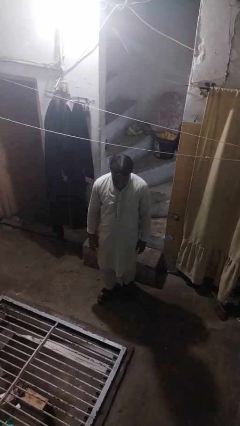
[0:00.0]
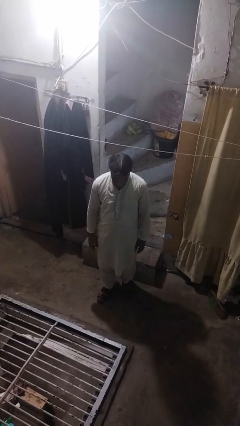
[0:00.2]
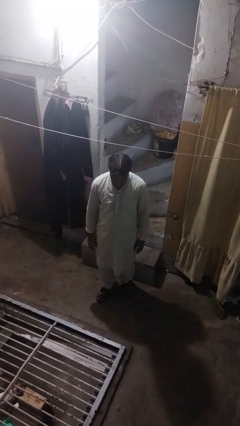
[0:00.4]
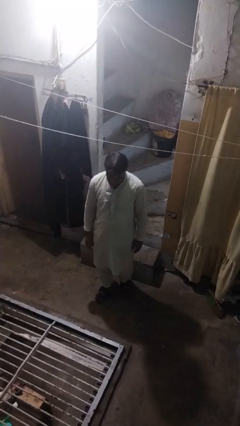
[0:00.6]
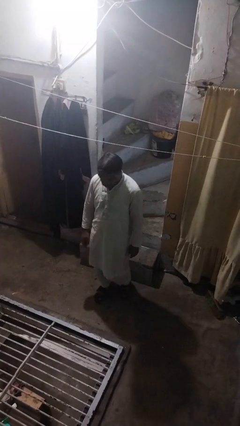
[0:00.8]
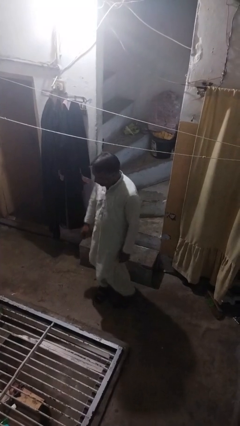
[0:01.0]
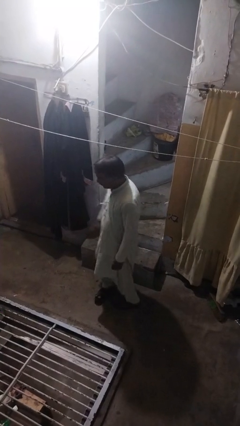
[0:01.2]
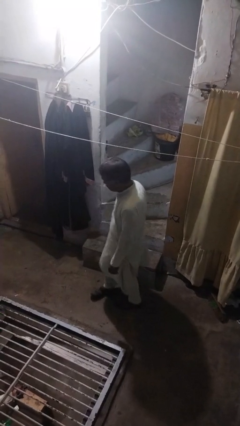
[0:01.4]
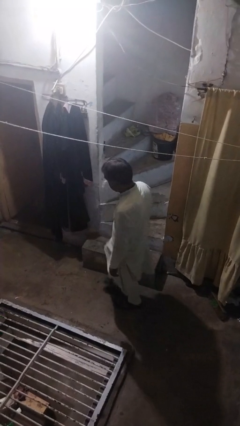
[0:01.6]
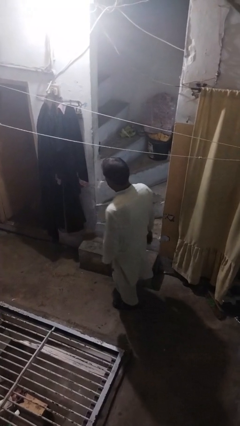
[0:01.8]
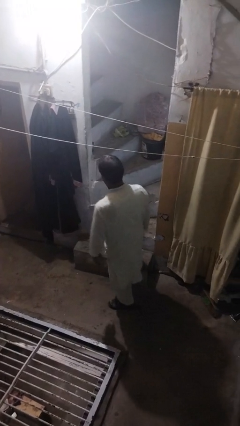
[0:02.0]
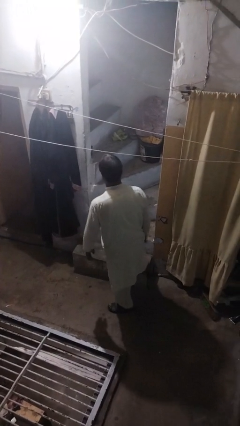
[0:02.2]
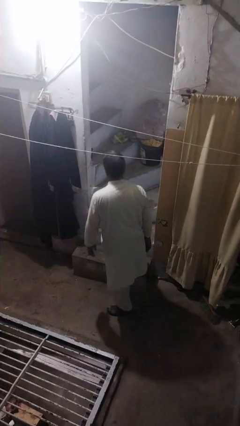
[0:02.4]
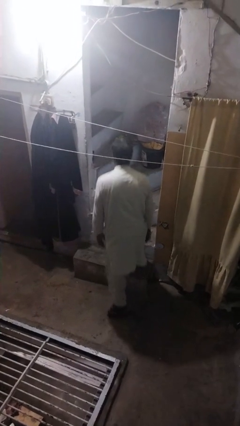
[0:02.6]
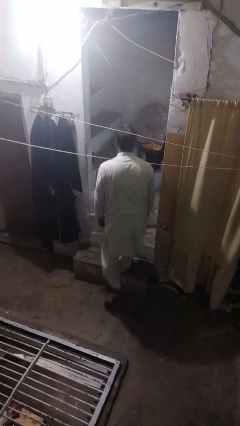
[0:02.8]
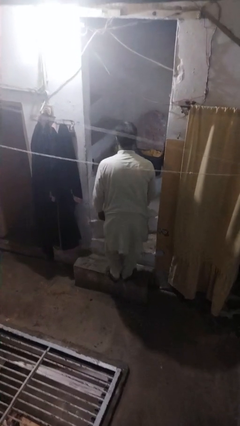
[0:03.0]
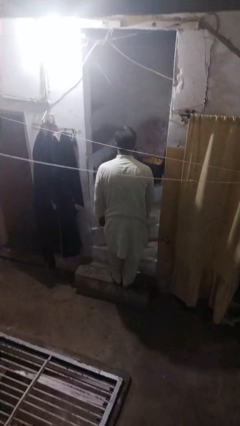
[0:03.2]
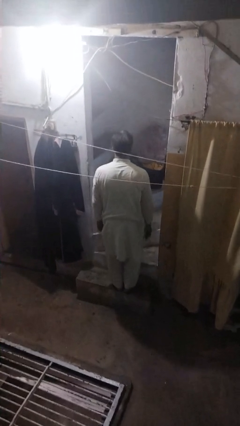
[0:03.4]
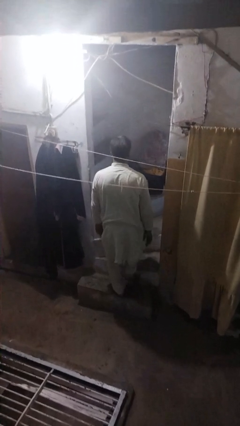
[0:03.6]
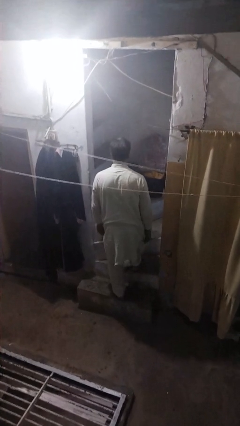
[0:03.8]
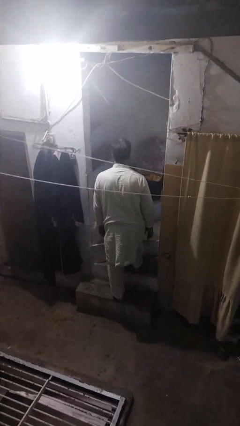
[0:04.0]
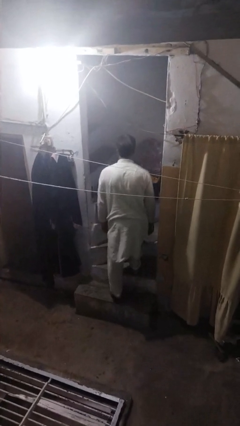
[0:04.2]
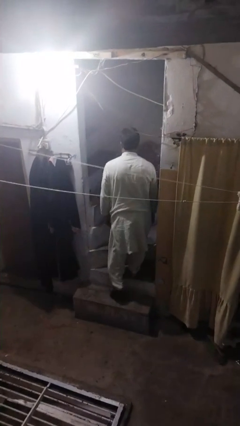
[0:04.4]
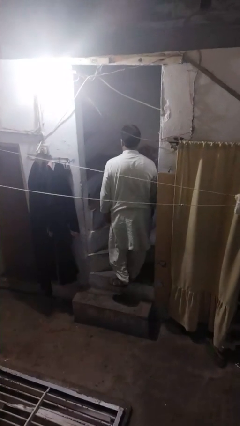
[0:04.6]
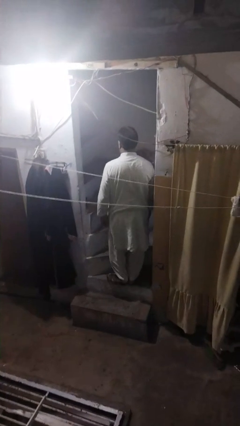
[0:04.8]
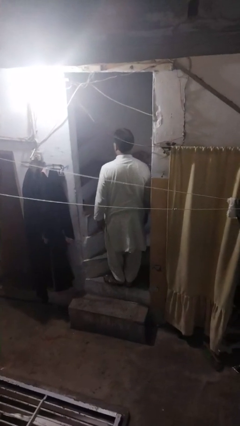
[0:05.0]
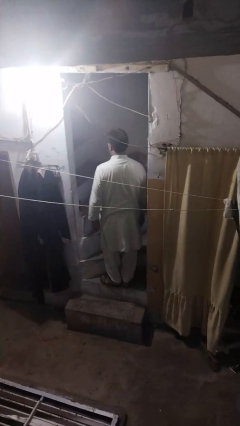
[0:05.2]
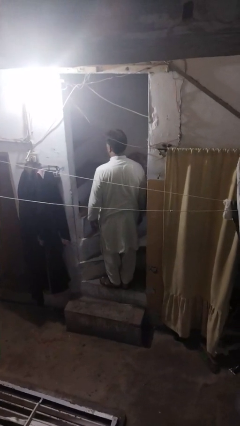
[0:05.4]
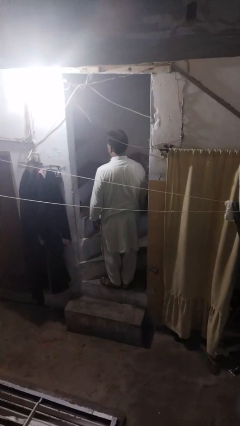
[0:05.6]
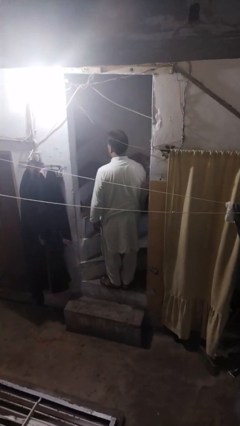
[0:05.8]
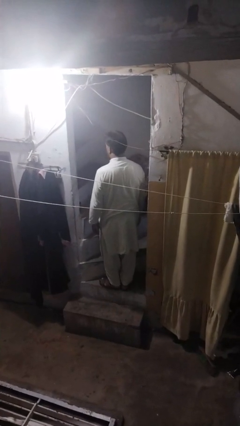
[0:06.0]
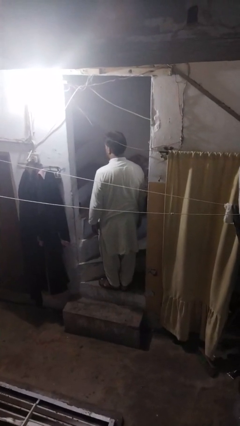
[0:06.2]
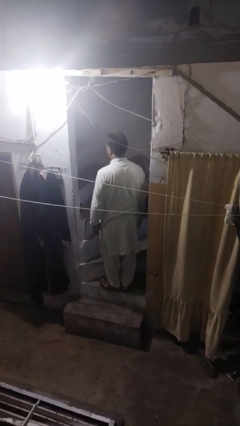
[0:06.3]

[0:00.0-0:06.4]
person climbs up stairs

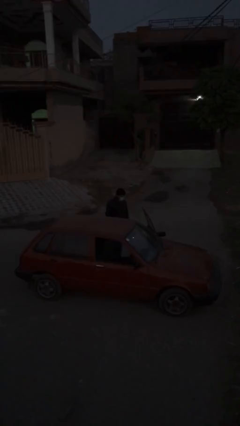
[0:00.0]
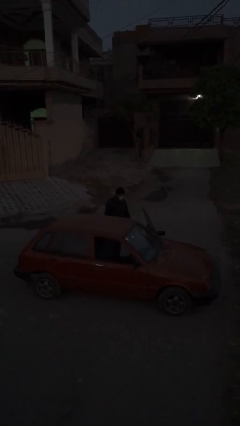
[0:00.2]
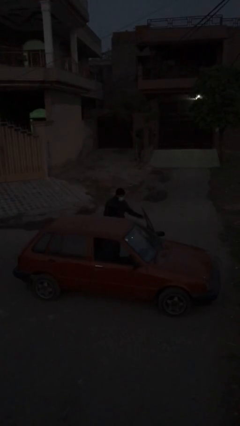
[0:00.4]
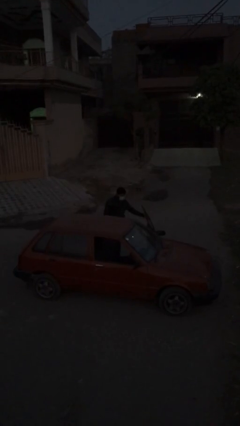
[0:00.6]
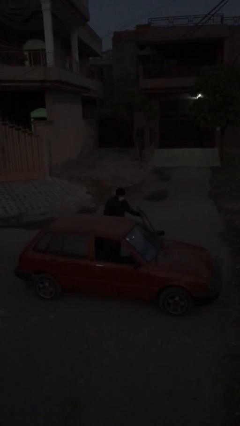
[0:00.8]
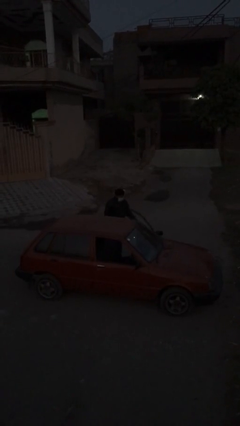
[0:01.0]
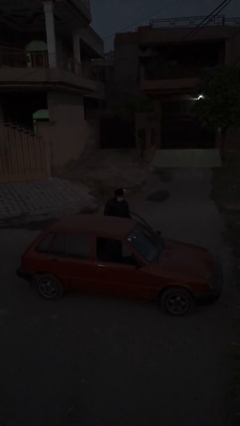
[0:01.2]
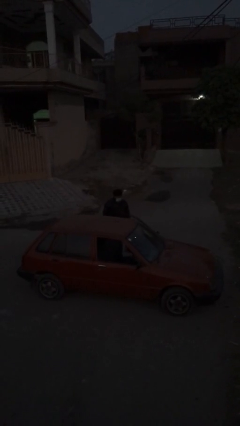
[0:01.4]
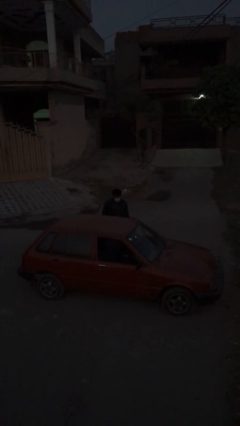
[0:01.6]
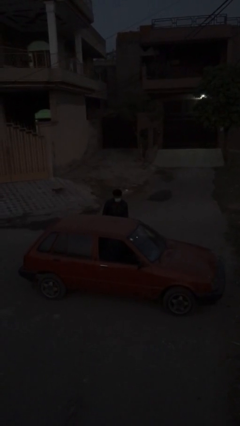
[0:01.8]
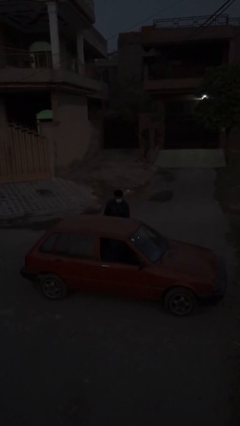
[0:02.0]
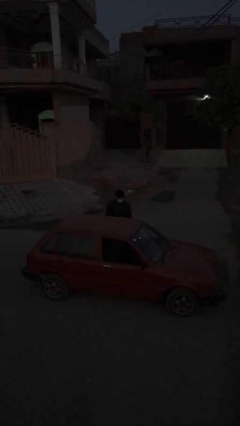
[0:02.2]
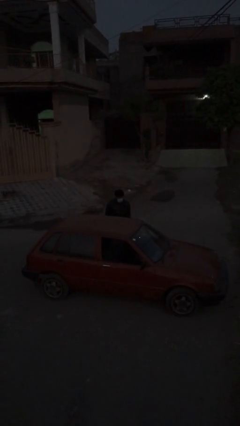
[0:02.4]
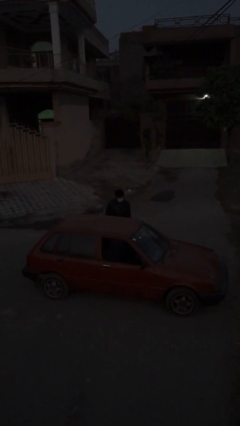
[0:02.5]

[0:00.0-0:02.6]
person closes car door

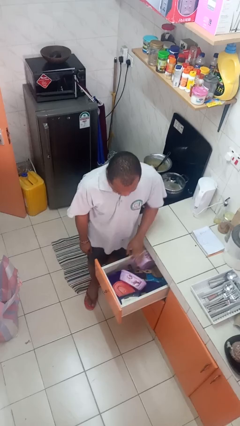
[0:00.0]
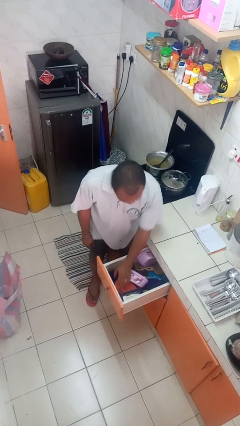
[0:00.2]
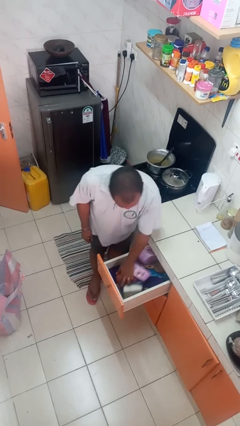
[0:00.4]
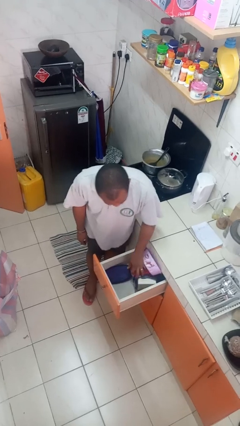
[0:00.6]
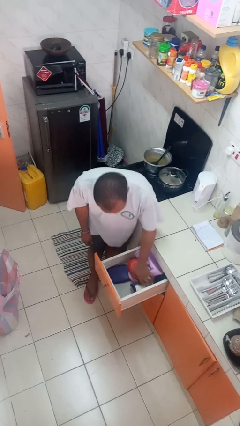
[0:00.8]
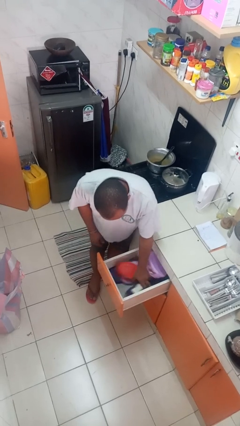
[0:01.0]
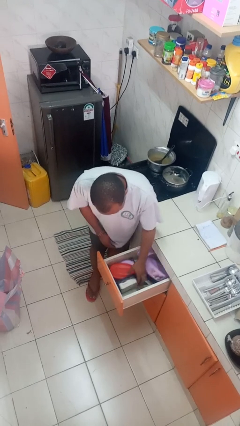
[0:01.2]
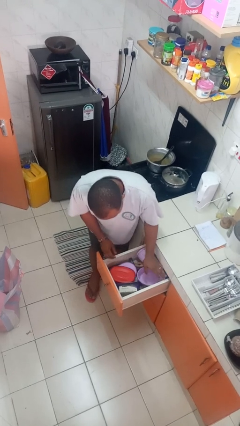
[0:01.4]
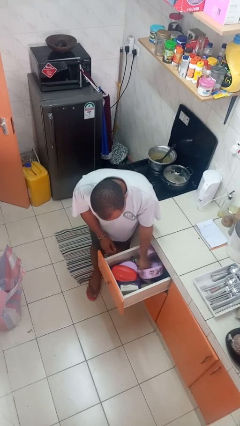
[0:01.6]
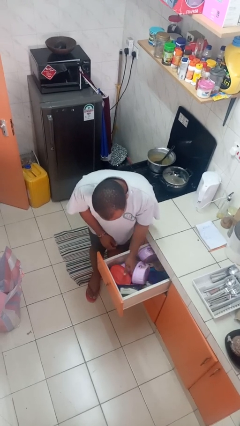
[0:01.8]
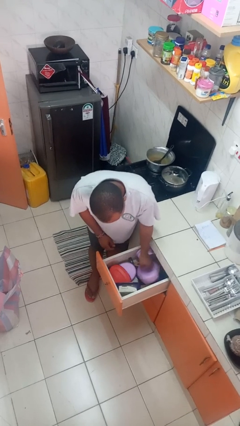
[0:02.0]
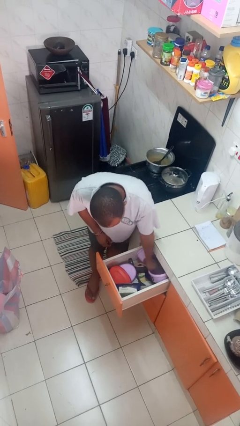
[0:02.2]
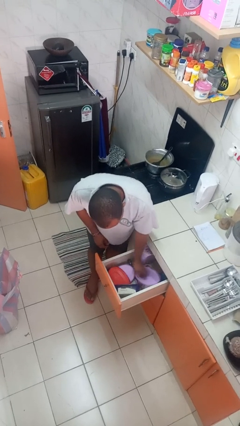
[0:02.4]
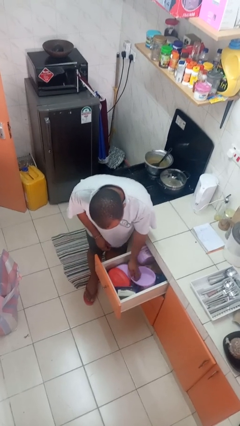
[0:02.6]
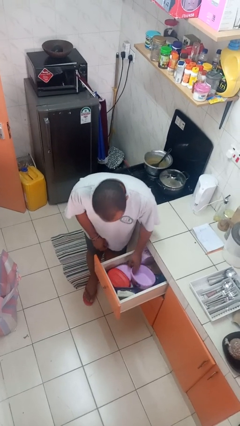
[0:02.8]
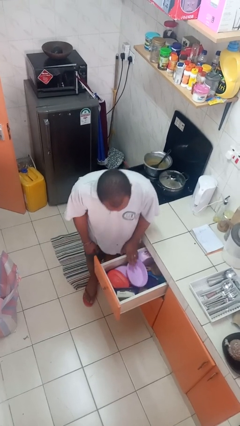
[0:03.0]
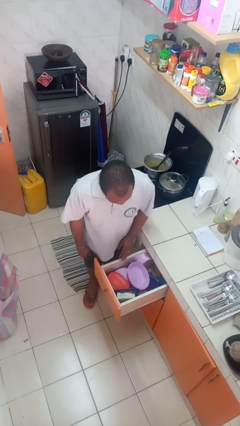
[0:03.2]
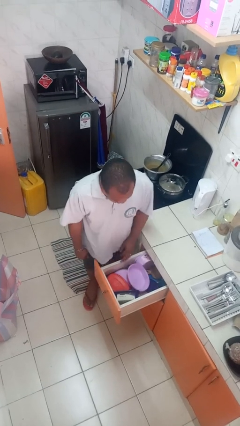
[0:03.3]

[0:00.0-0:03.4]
person searches in kitchen drawer

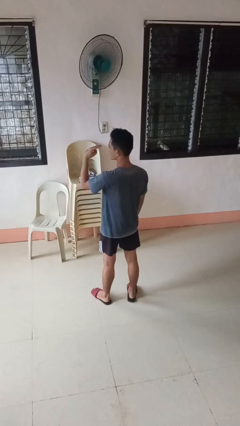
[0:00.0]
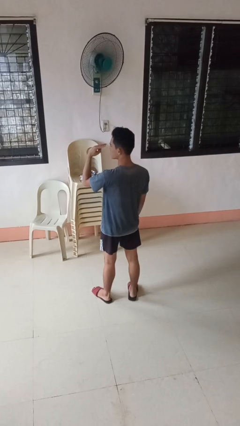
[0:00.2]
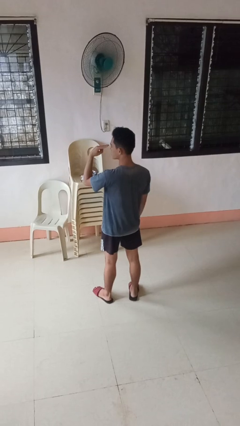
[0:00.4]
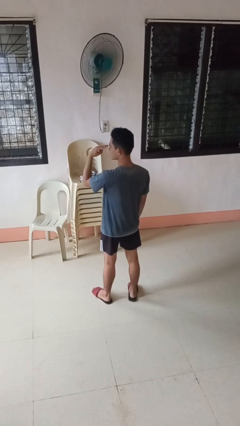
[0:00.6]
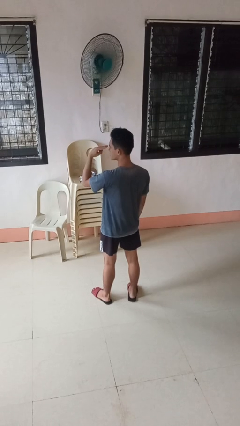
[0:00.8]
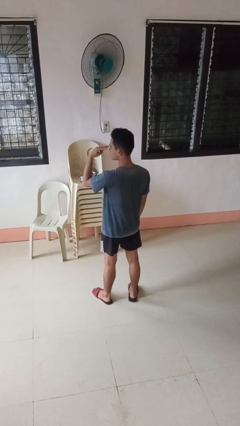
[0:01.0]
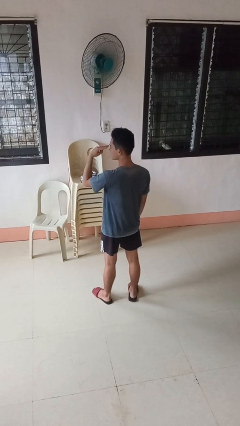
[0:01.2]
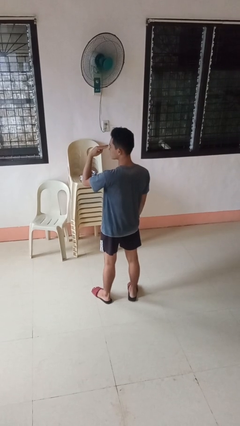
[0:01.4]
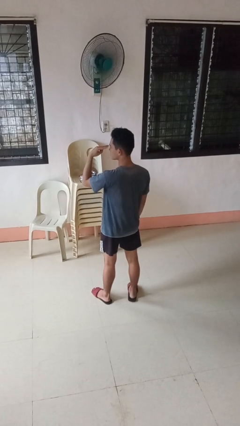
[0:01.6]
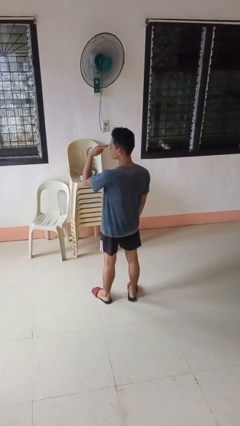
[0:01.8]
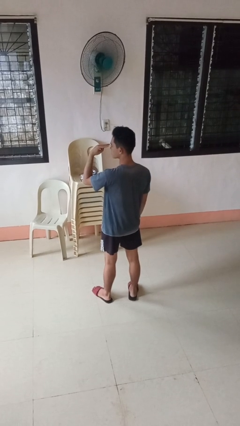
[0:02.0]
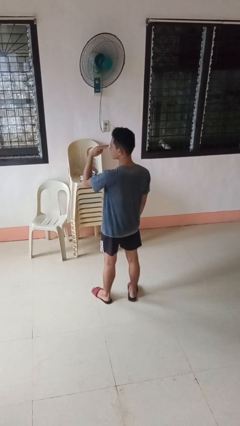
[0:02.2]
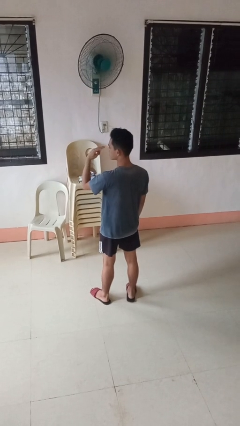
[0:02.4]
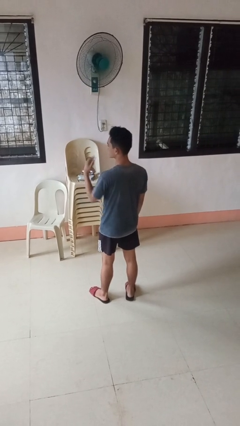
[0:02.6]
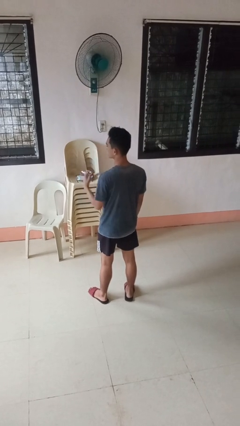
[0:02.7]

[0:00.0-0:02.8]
person gestures watch closely

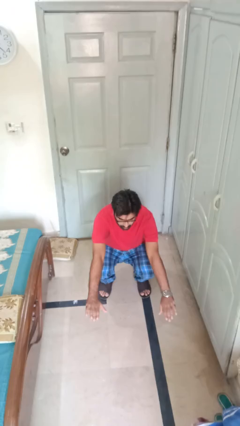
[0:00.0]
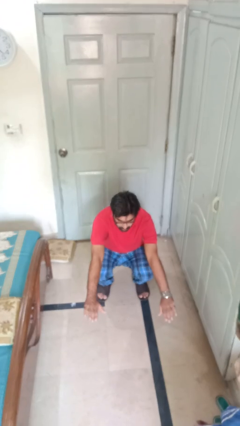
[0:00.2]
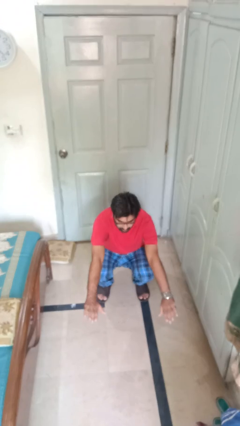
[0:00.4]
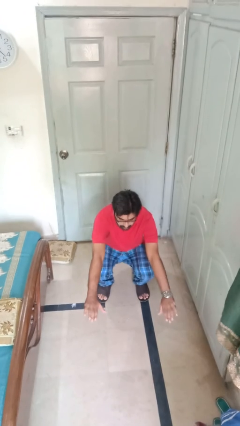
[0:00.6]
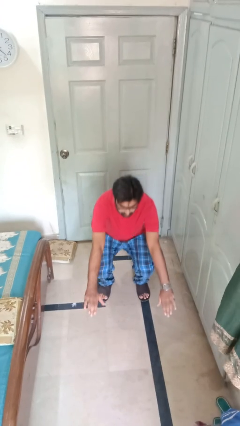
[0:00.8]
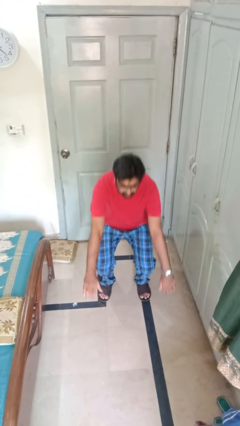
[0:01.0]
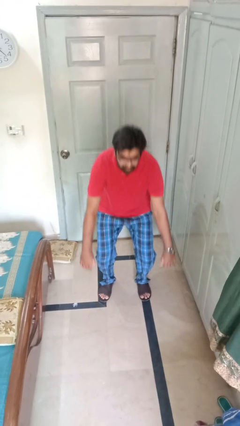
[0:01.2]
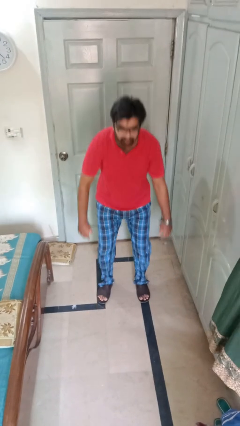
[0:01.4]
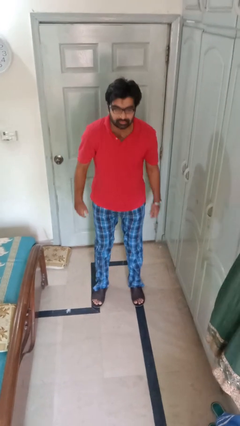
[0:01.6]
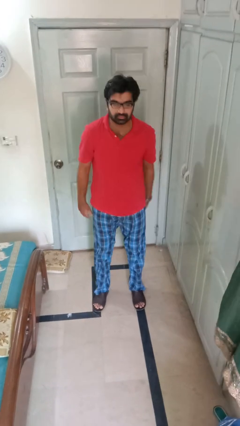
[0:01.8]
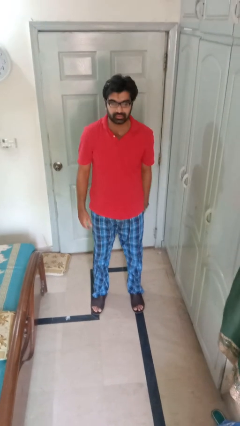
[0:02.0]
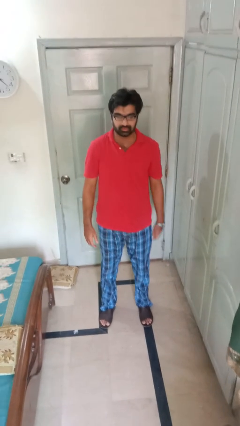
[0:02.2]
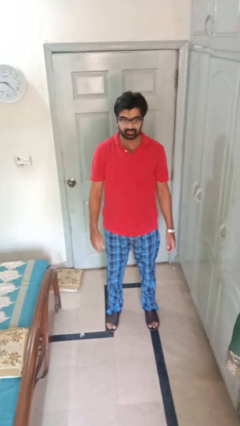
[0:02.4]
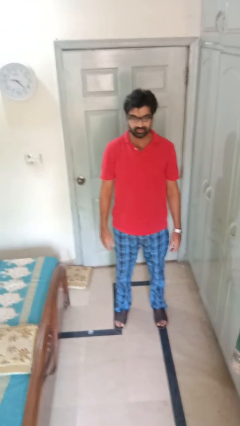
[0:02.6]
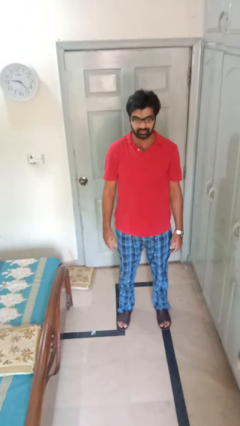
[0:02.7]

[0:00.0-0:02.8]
person stands up
